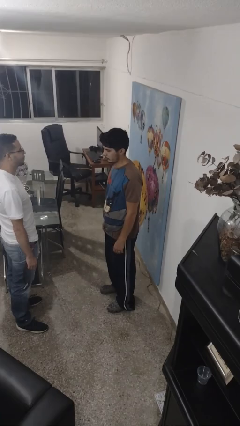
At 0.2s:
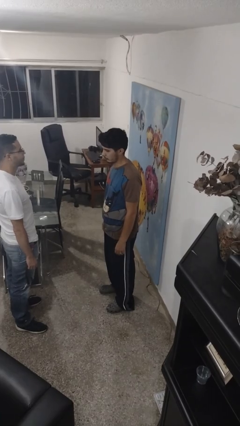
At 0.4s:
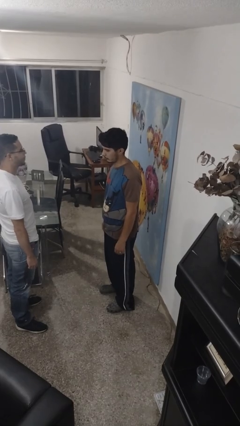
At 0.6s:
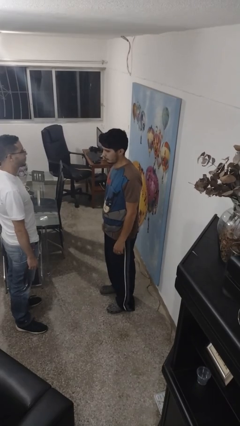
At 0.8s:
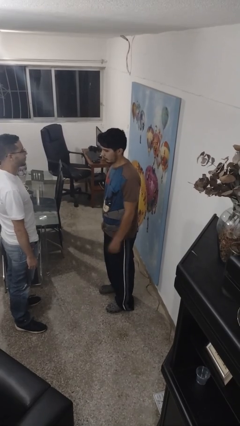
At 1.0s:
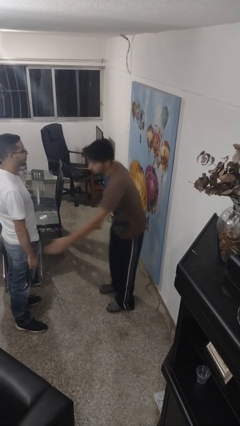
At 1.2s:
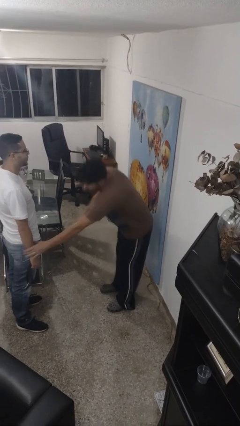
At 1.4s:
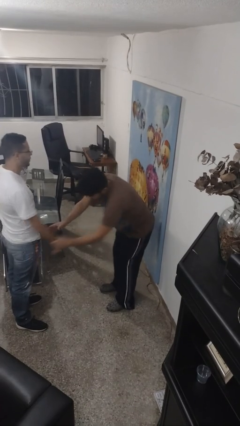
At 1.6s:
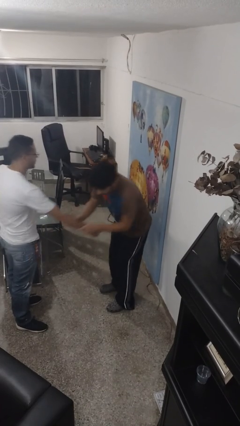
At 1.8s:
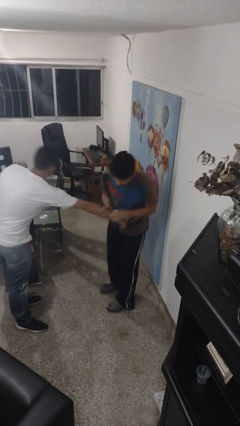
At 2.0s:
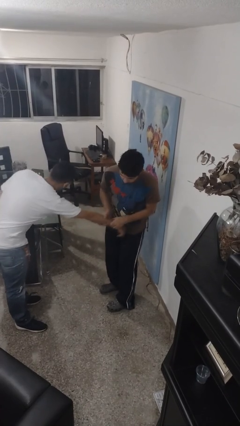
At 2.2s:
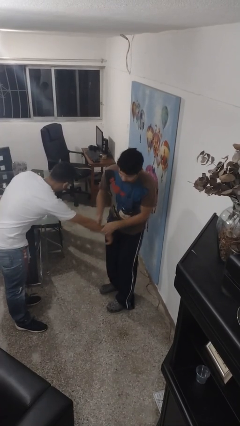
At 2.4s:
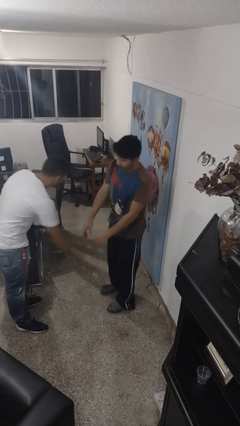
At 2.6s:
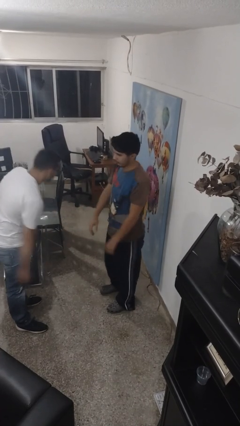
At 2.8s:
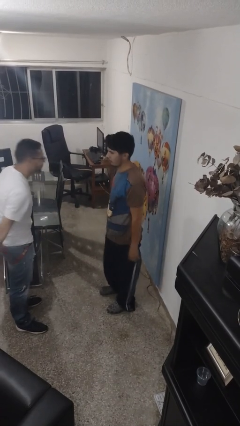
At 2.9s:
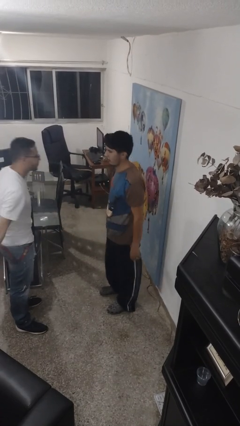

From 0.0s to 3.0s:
person grabs person by forearm

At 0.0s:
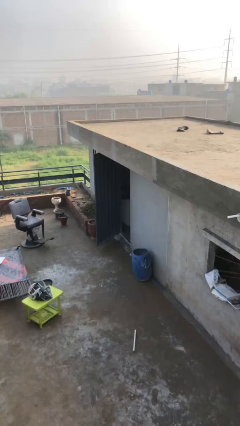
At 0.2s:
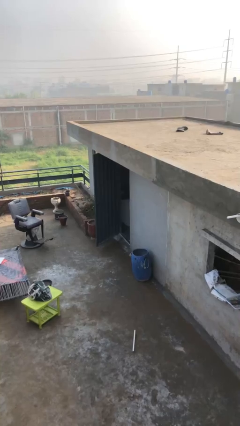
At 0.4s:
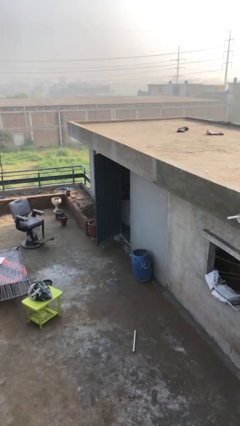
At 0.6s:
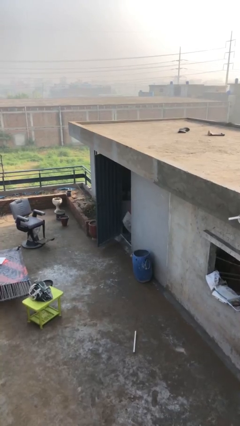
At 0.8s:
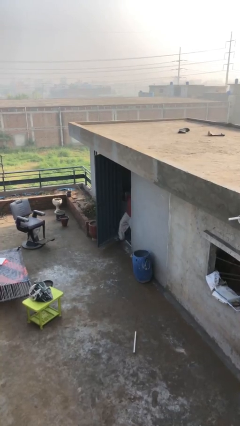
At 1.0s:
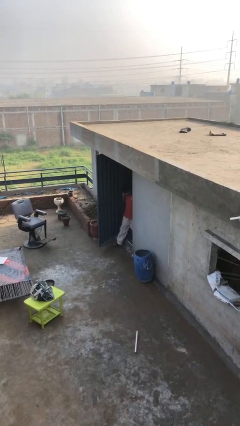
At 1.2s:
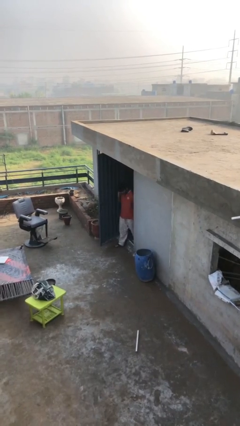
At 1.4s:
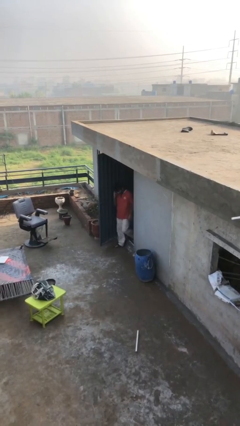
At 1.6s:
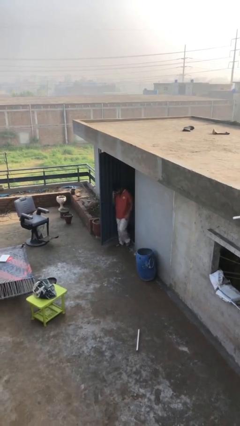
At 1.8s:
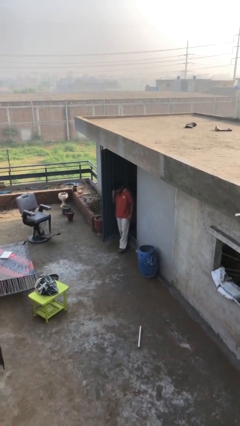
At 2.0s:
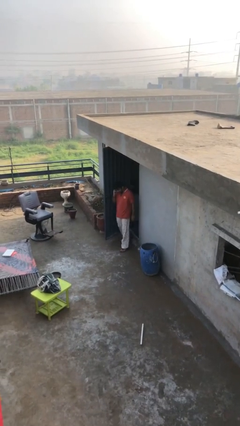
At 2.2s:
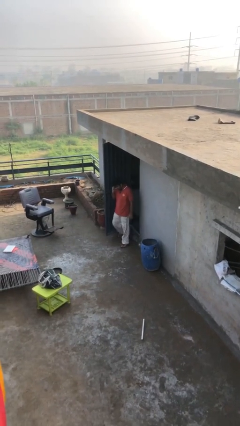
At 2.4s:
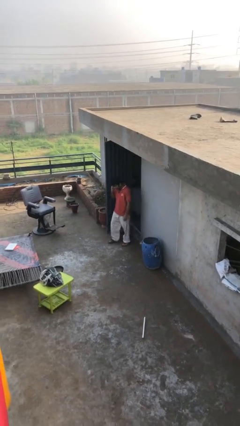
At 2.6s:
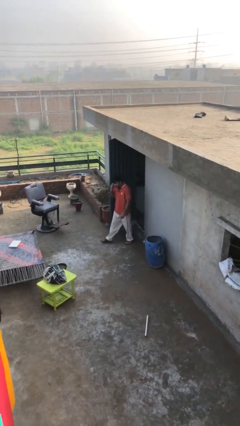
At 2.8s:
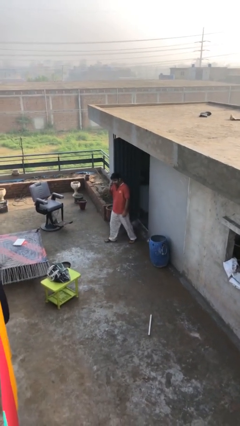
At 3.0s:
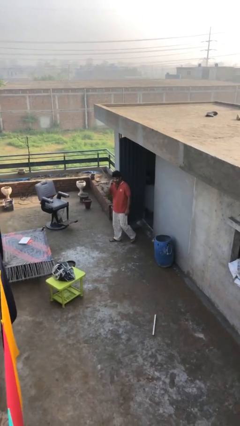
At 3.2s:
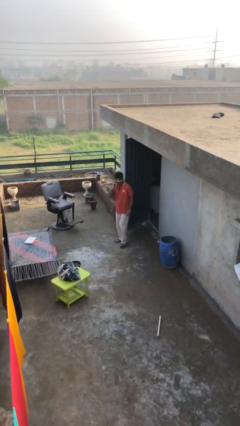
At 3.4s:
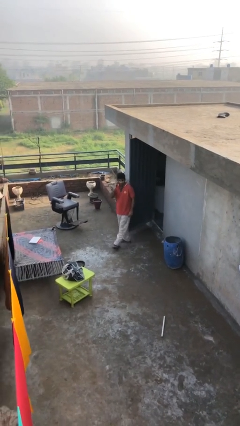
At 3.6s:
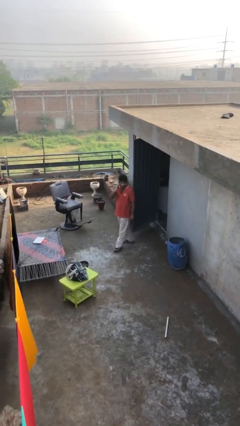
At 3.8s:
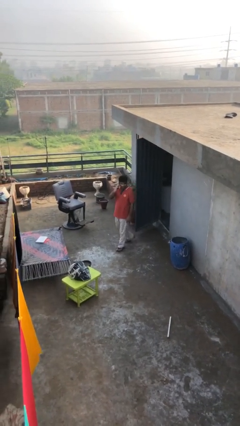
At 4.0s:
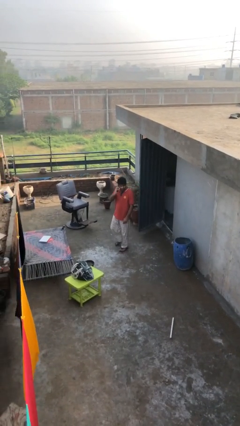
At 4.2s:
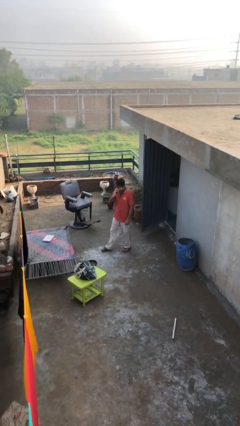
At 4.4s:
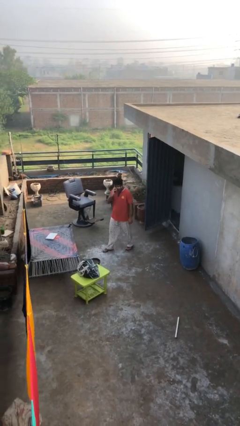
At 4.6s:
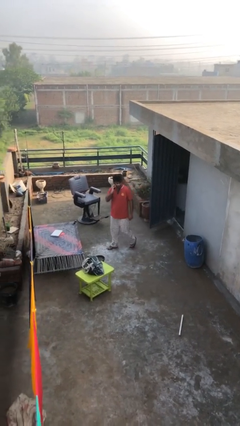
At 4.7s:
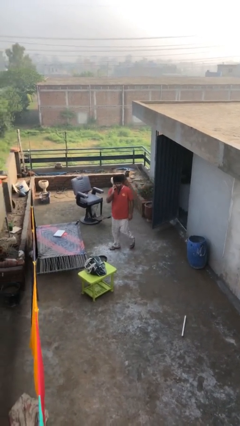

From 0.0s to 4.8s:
person enters scene through structure

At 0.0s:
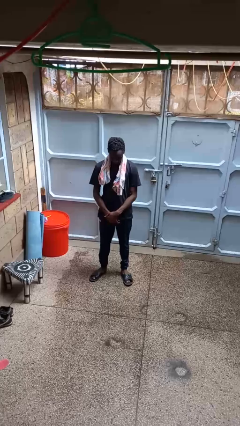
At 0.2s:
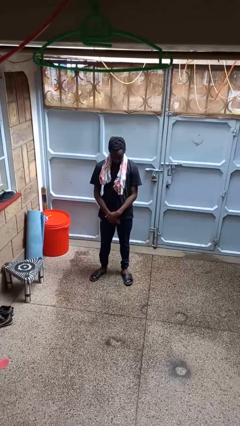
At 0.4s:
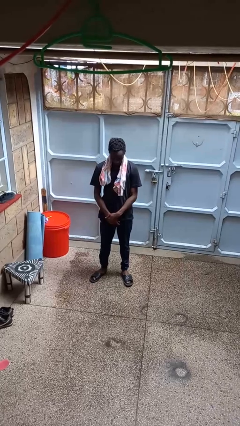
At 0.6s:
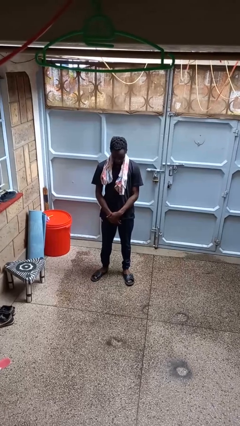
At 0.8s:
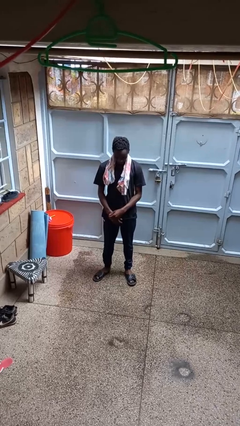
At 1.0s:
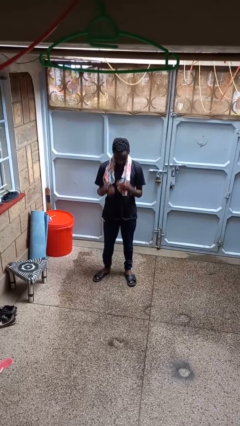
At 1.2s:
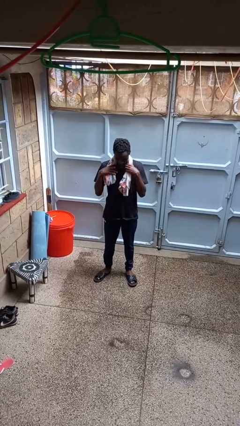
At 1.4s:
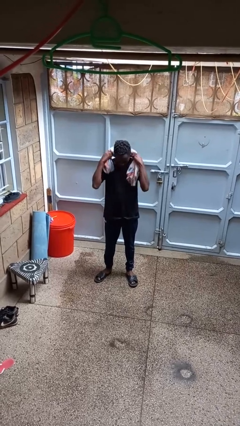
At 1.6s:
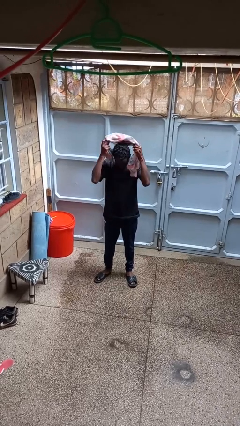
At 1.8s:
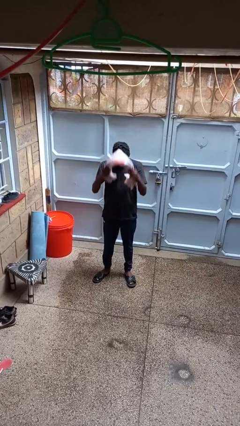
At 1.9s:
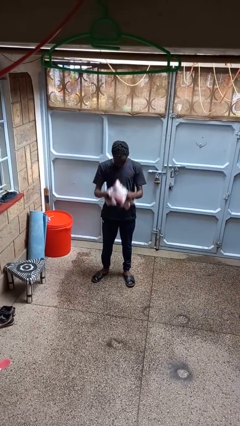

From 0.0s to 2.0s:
person takes off scarf

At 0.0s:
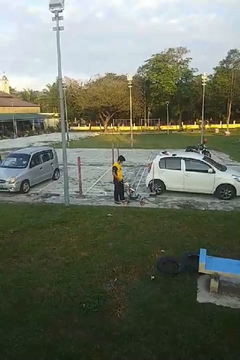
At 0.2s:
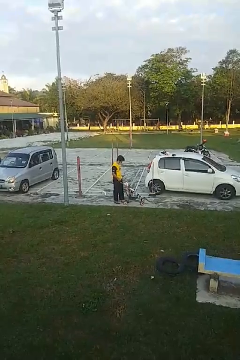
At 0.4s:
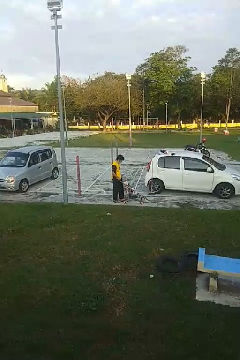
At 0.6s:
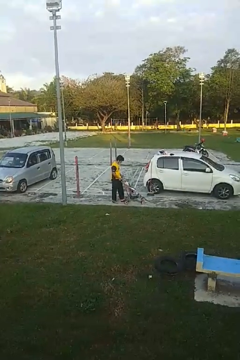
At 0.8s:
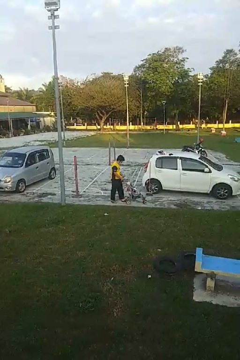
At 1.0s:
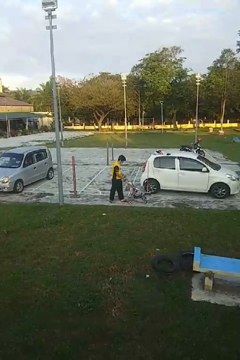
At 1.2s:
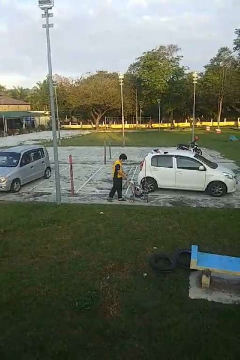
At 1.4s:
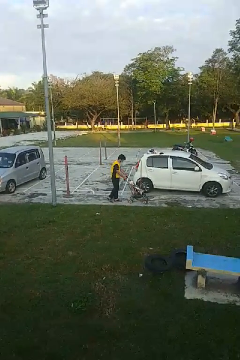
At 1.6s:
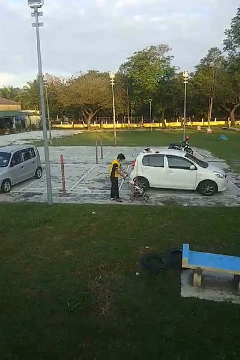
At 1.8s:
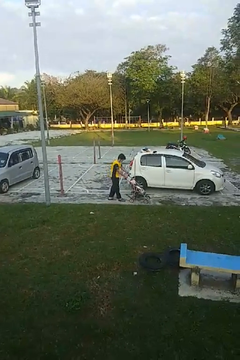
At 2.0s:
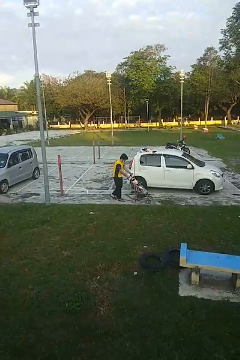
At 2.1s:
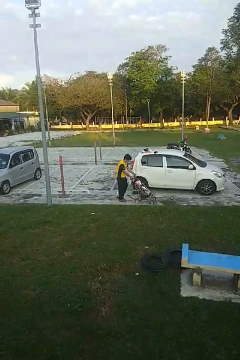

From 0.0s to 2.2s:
person pushes wheeled cart

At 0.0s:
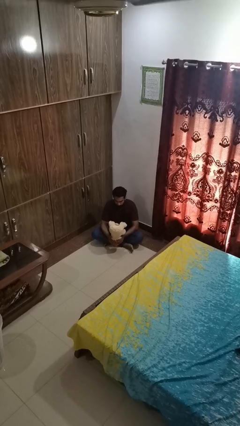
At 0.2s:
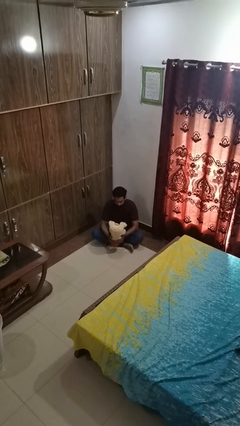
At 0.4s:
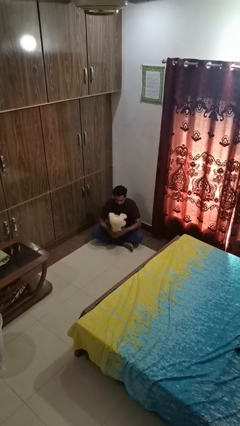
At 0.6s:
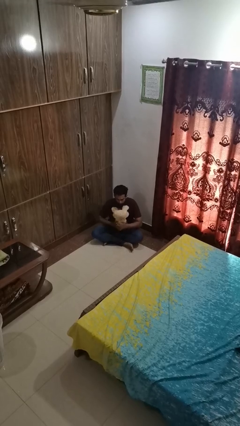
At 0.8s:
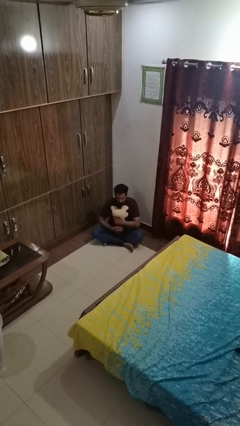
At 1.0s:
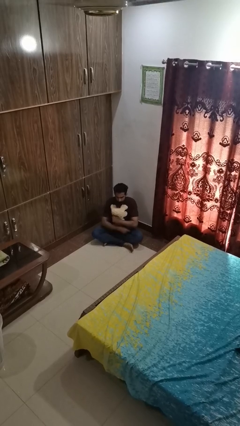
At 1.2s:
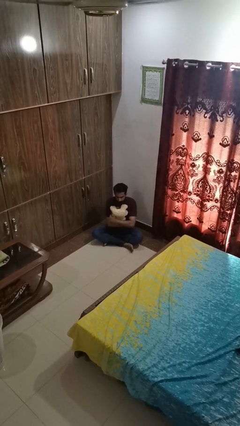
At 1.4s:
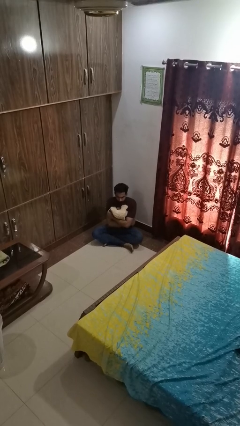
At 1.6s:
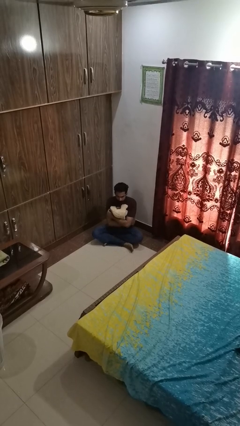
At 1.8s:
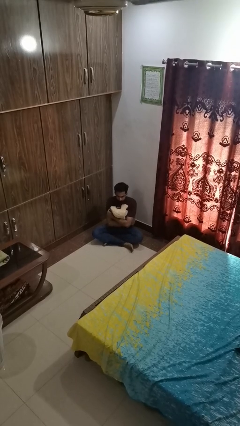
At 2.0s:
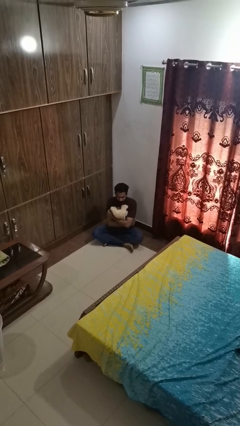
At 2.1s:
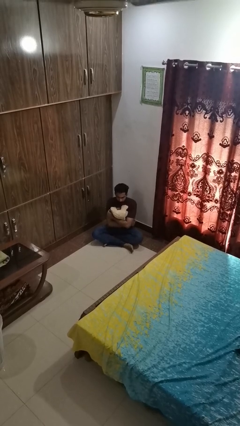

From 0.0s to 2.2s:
person hugs stuffed animal

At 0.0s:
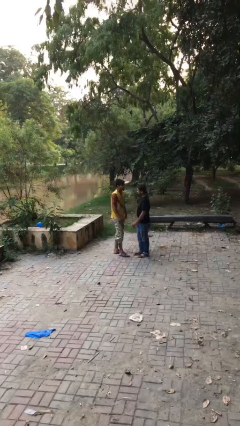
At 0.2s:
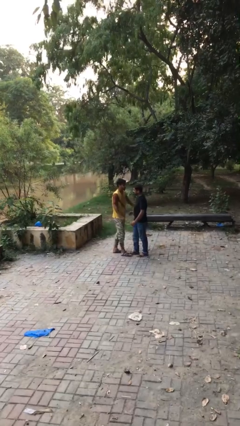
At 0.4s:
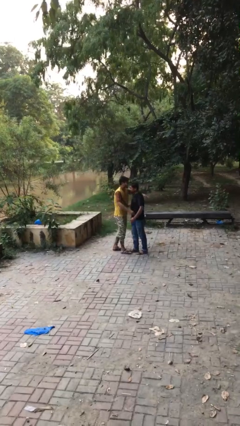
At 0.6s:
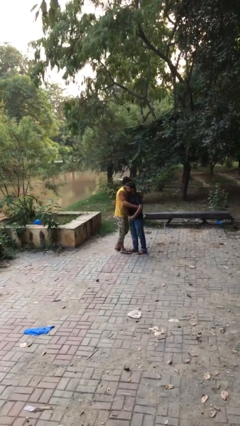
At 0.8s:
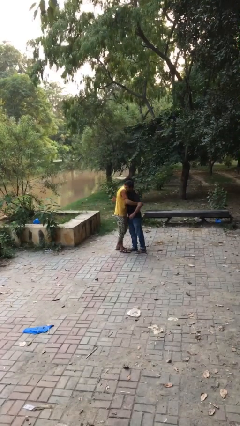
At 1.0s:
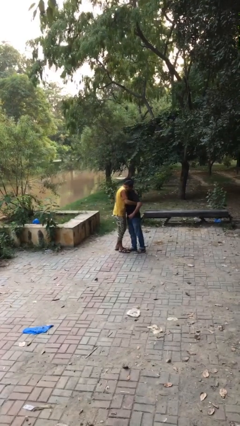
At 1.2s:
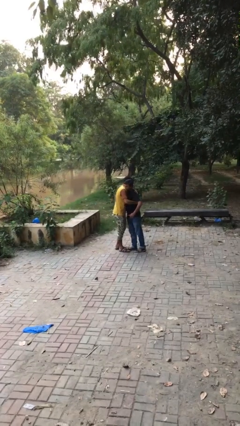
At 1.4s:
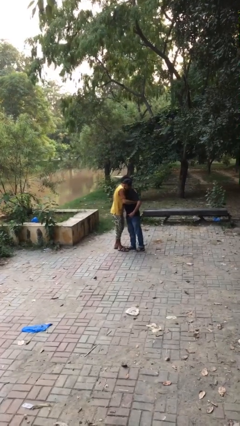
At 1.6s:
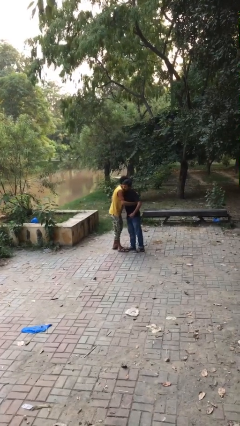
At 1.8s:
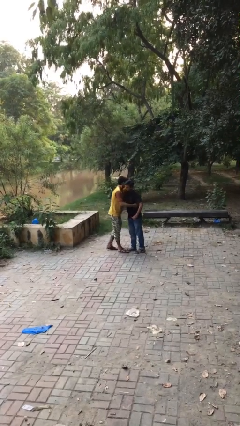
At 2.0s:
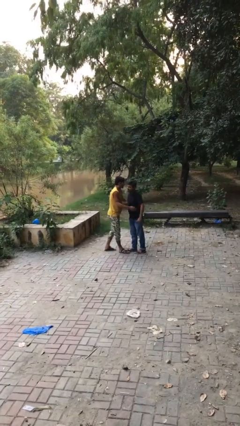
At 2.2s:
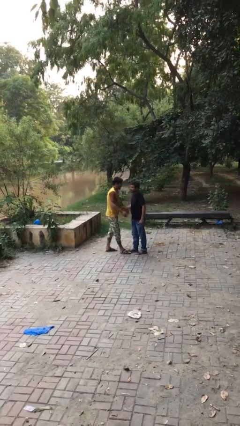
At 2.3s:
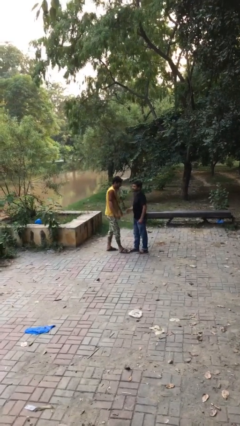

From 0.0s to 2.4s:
person embraces person

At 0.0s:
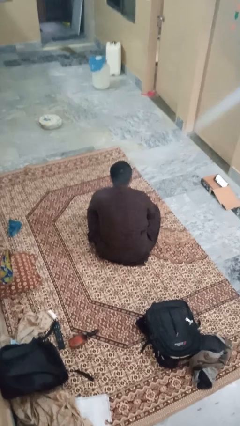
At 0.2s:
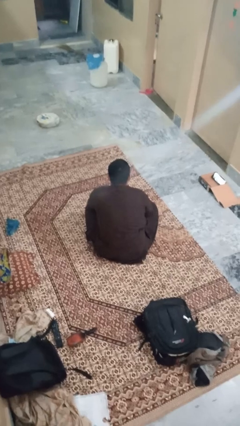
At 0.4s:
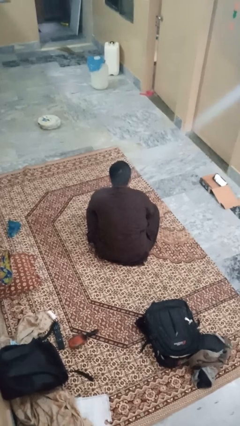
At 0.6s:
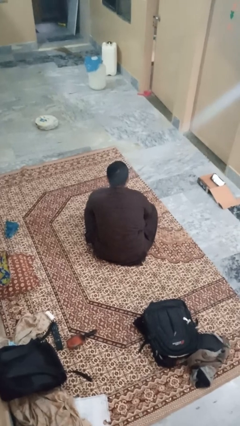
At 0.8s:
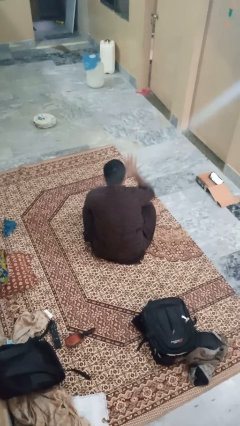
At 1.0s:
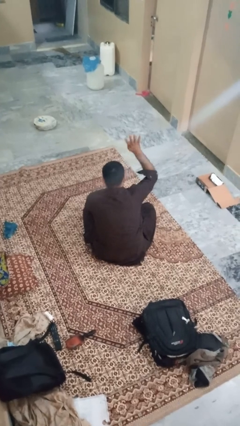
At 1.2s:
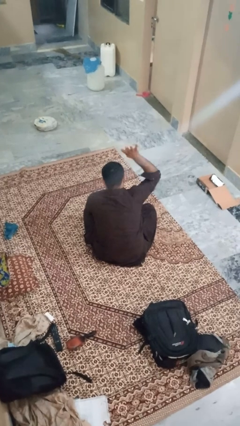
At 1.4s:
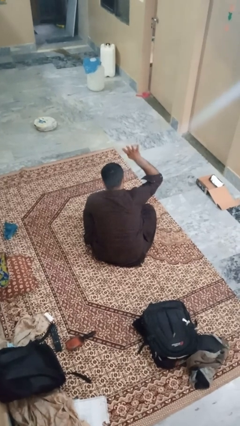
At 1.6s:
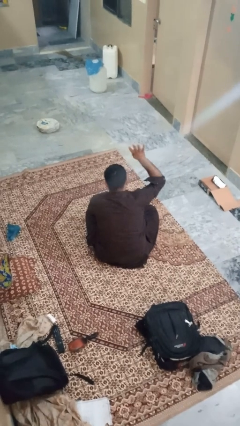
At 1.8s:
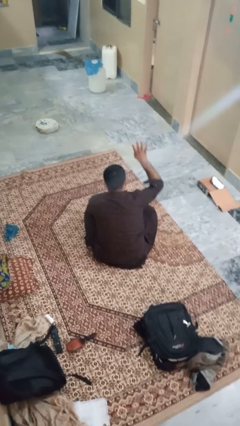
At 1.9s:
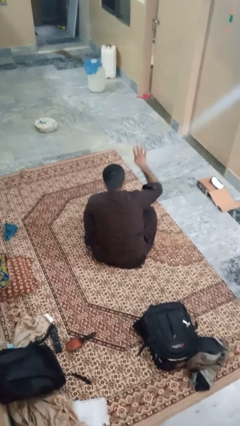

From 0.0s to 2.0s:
person gestures number four
